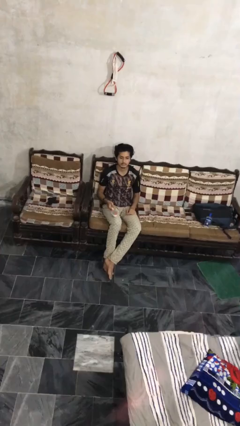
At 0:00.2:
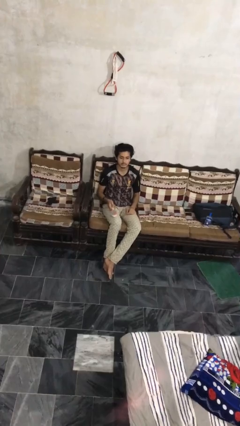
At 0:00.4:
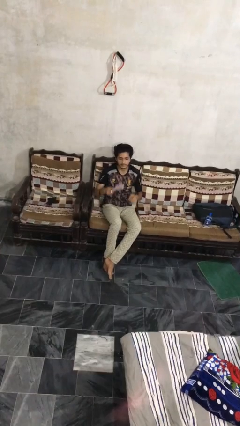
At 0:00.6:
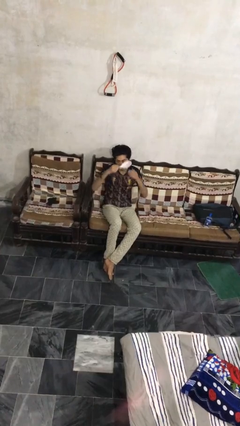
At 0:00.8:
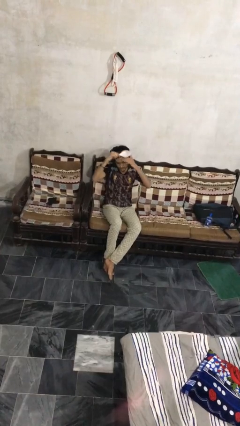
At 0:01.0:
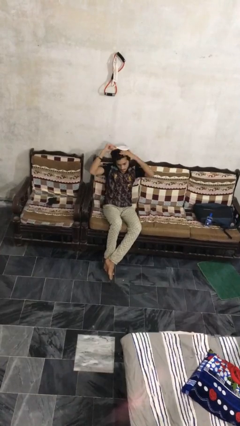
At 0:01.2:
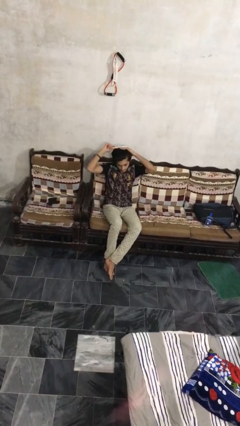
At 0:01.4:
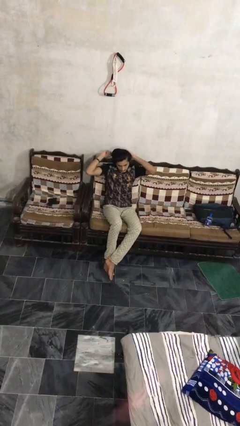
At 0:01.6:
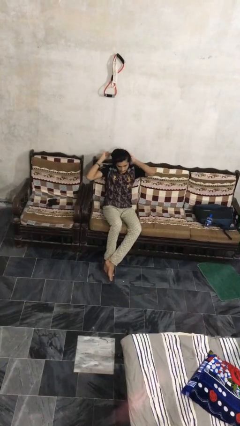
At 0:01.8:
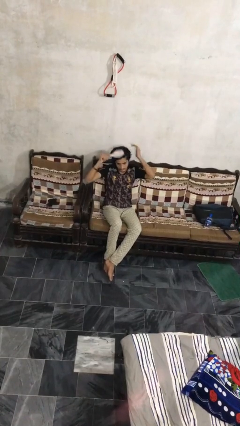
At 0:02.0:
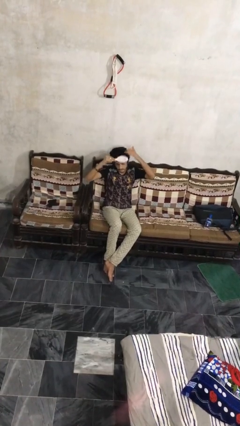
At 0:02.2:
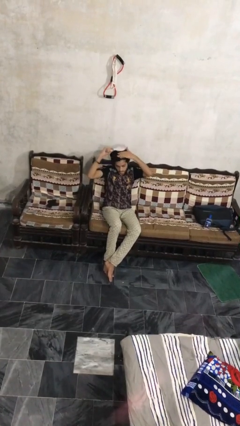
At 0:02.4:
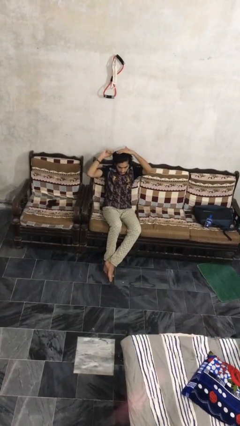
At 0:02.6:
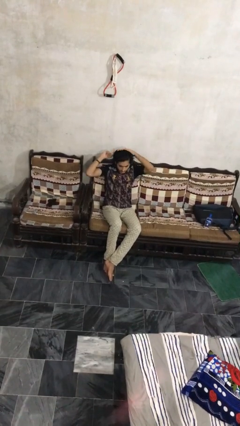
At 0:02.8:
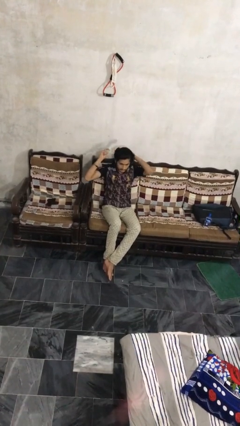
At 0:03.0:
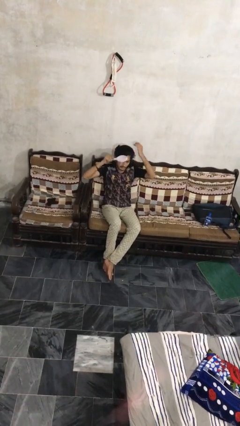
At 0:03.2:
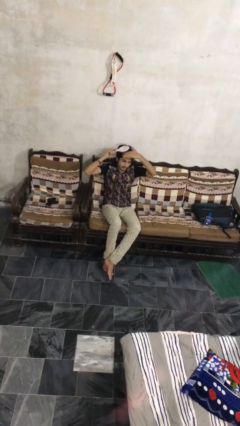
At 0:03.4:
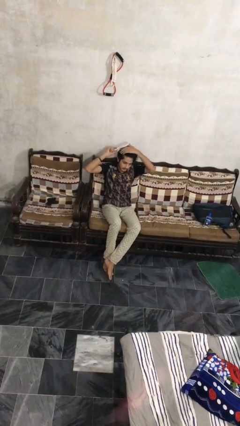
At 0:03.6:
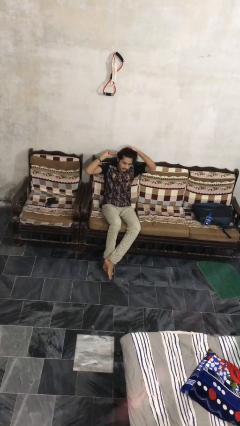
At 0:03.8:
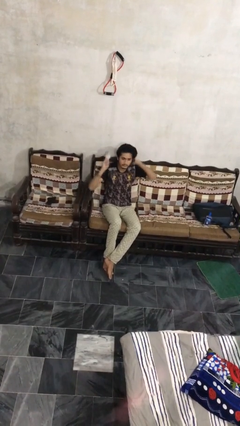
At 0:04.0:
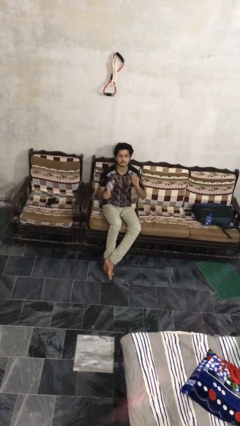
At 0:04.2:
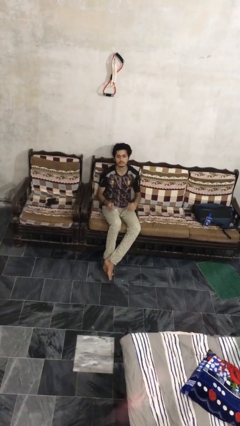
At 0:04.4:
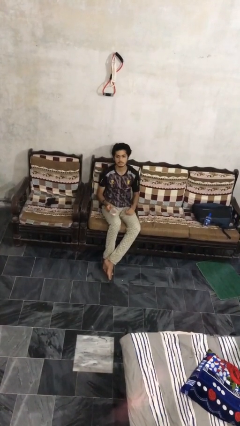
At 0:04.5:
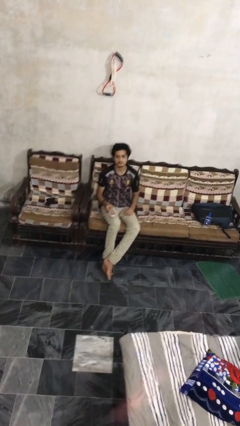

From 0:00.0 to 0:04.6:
person brushes hair

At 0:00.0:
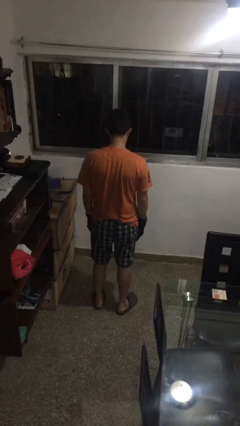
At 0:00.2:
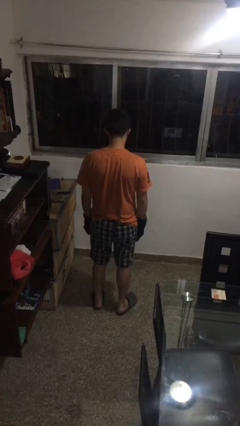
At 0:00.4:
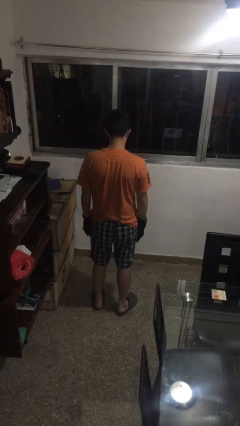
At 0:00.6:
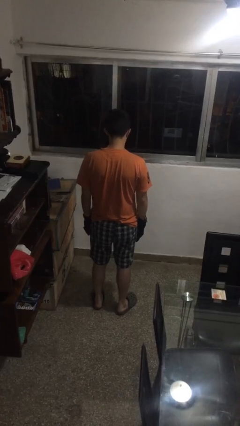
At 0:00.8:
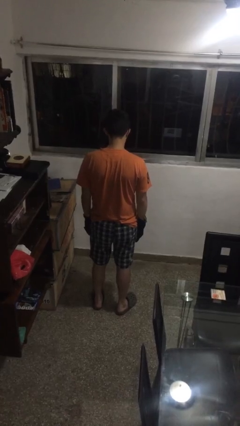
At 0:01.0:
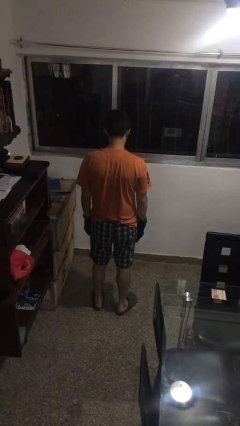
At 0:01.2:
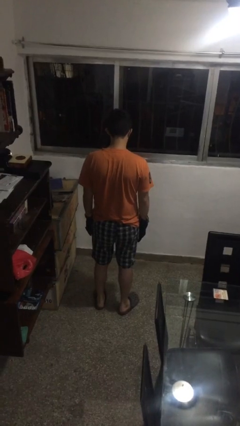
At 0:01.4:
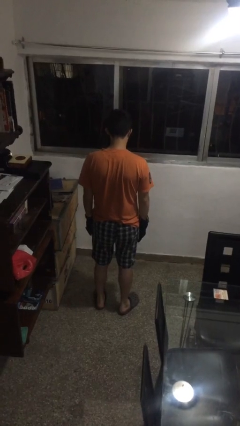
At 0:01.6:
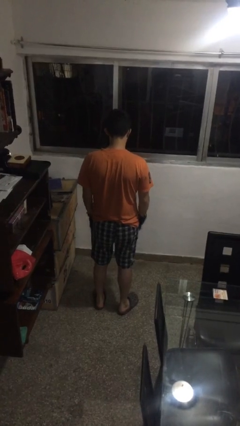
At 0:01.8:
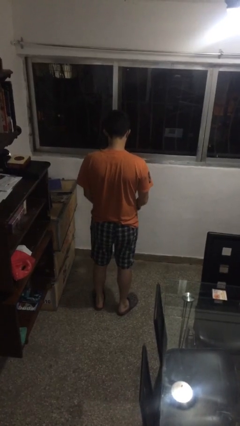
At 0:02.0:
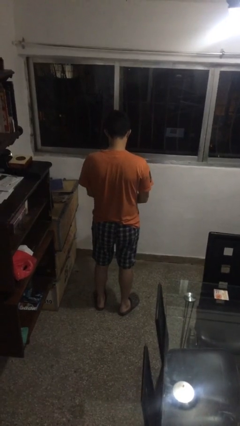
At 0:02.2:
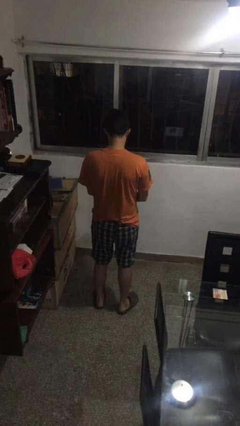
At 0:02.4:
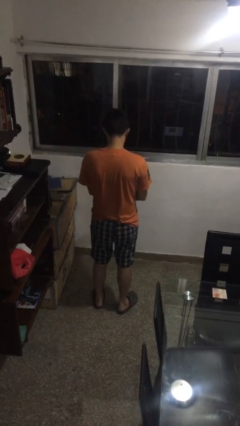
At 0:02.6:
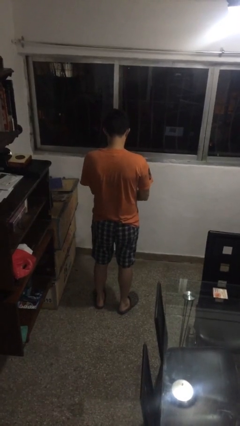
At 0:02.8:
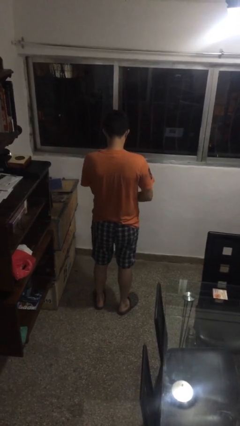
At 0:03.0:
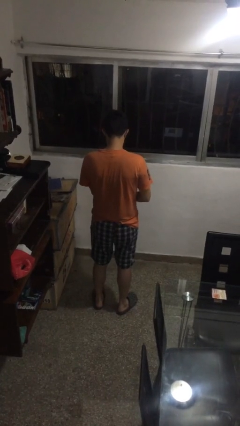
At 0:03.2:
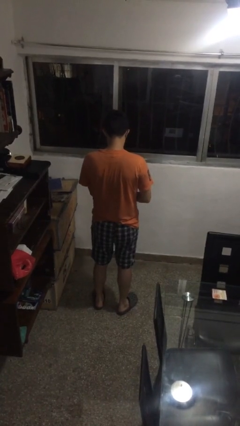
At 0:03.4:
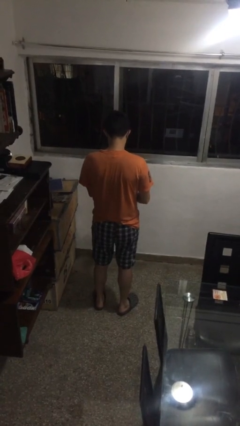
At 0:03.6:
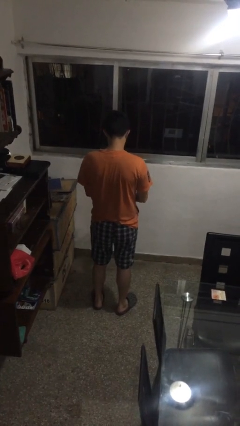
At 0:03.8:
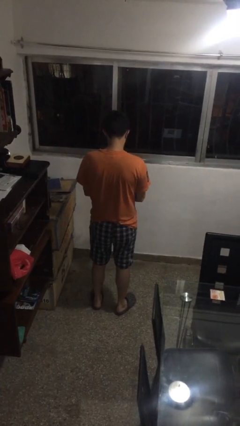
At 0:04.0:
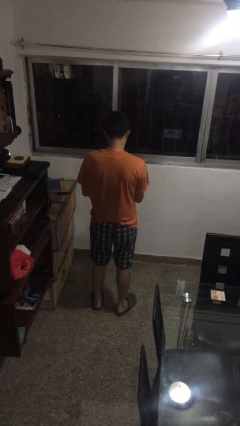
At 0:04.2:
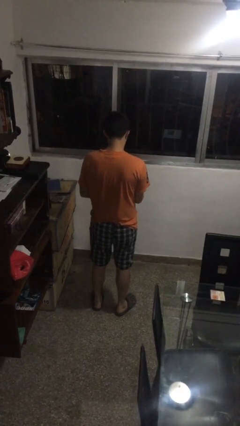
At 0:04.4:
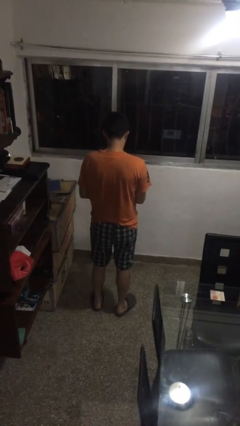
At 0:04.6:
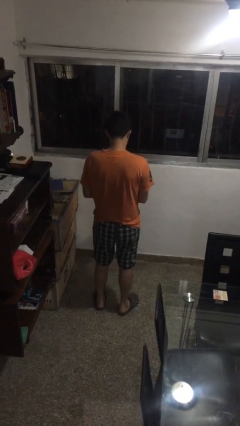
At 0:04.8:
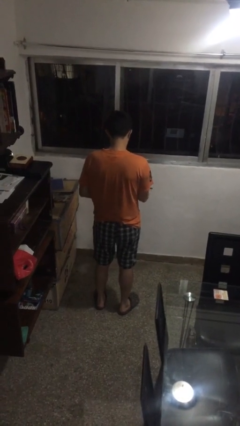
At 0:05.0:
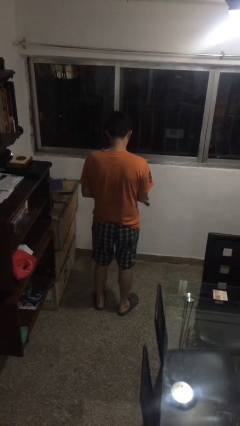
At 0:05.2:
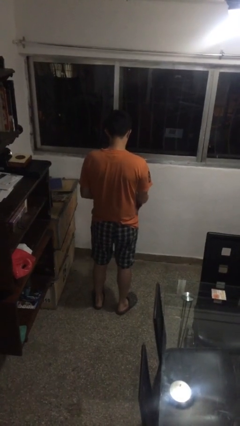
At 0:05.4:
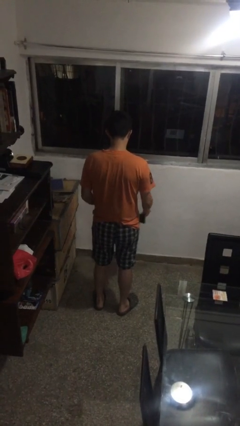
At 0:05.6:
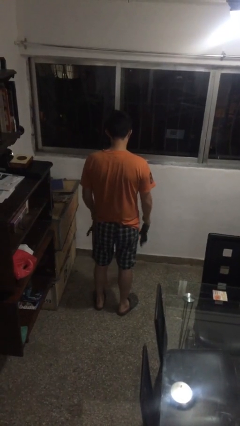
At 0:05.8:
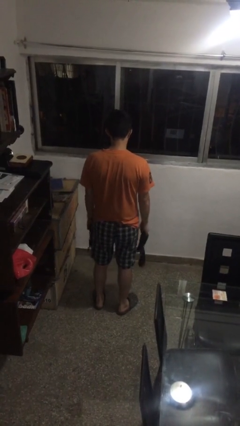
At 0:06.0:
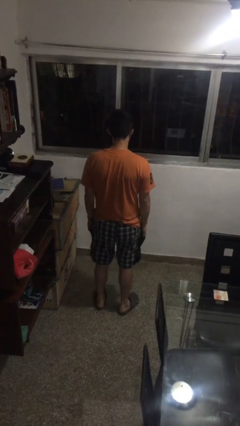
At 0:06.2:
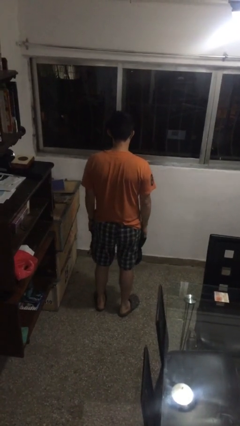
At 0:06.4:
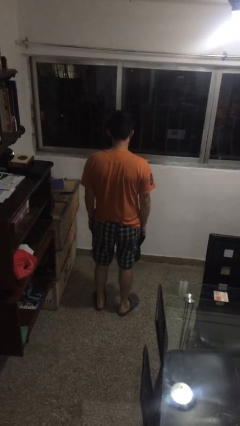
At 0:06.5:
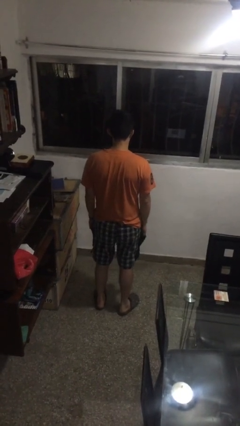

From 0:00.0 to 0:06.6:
person takes off gloves

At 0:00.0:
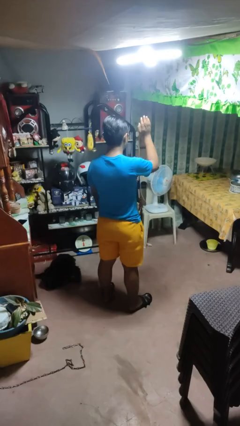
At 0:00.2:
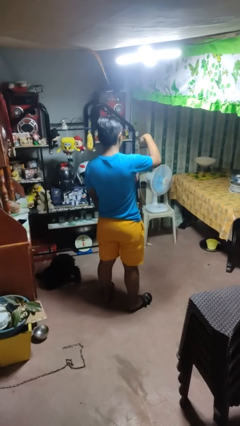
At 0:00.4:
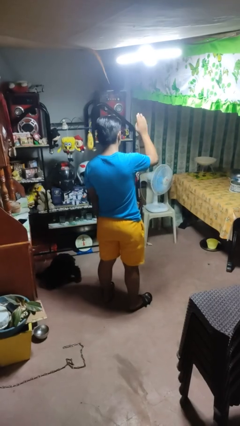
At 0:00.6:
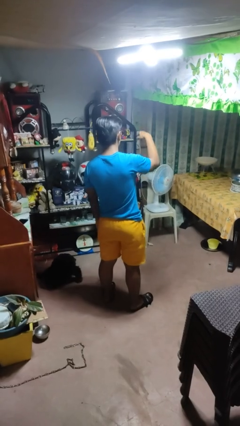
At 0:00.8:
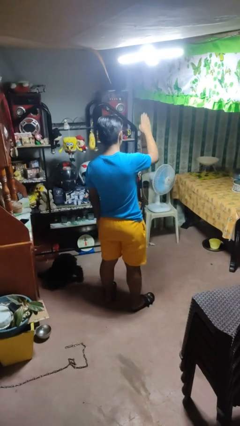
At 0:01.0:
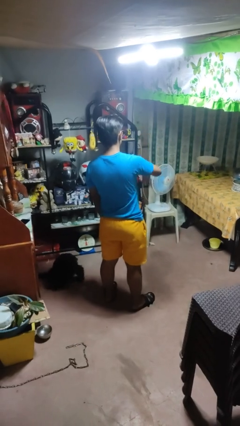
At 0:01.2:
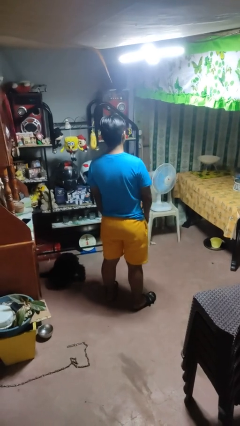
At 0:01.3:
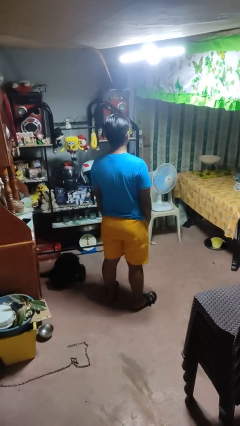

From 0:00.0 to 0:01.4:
person gestures come here

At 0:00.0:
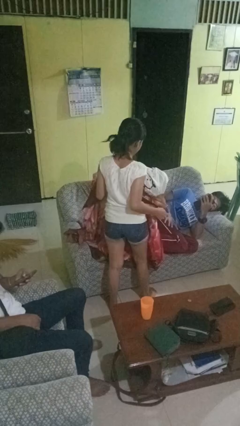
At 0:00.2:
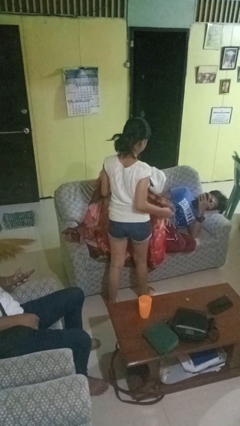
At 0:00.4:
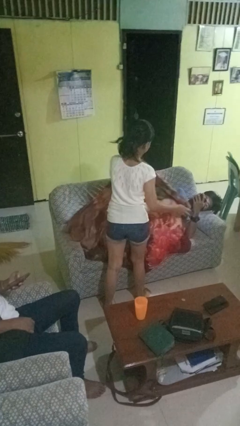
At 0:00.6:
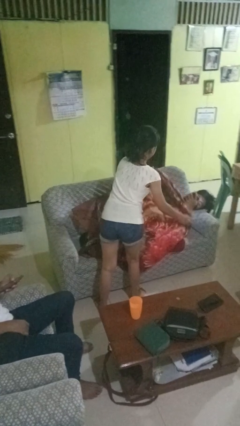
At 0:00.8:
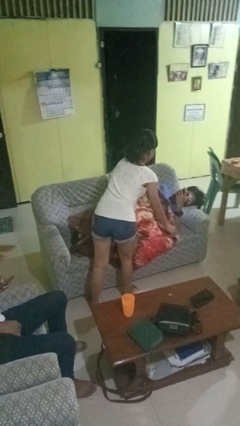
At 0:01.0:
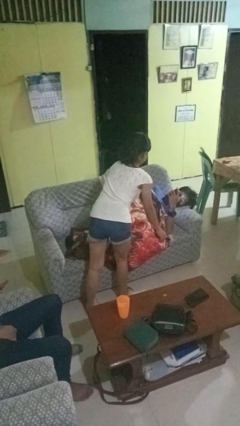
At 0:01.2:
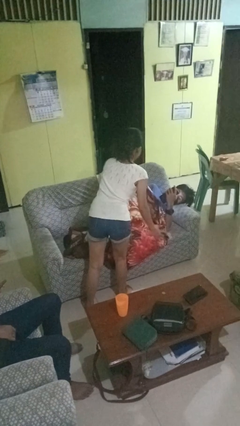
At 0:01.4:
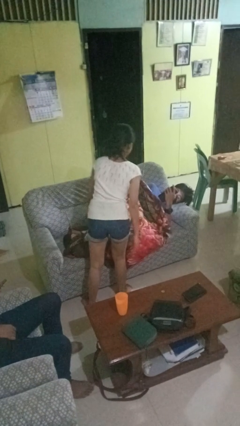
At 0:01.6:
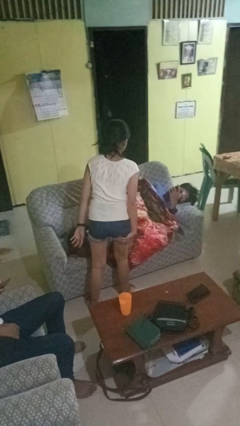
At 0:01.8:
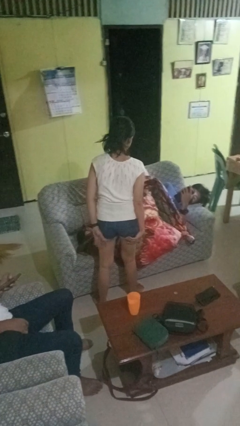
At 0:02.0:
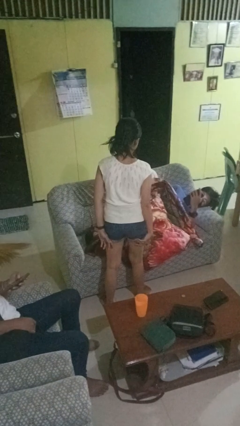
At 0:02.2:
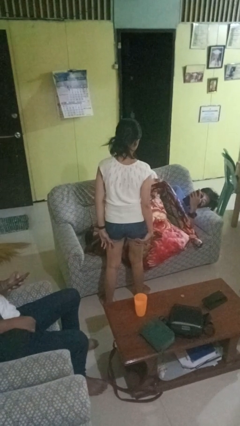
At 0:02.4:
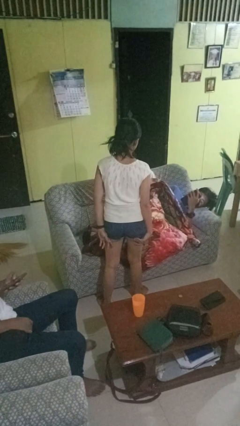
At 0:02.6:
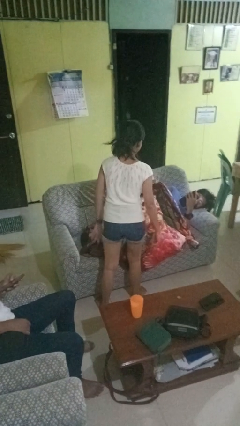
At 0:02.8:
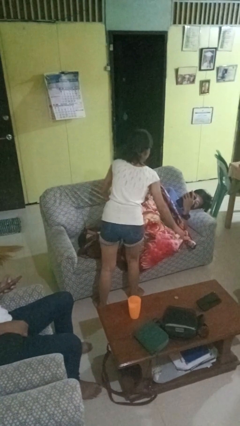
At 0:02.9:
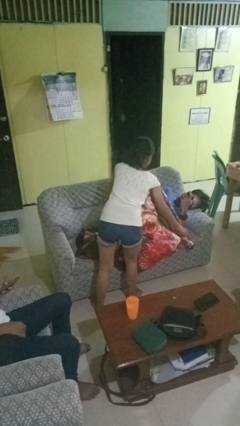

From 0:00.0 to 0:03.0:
person covers friend with blanket

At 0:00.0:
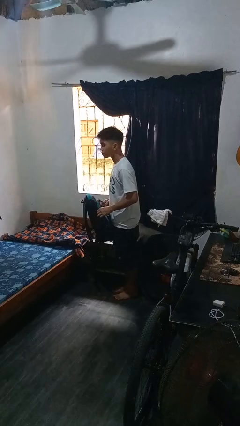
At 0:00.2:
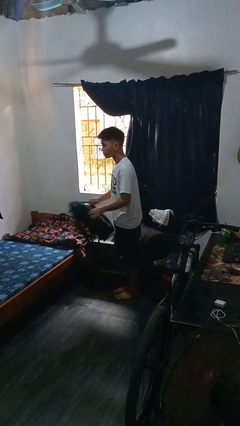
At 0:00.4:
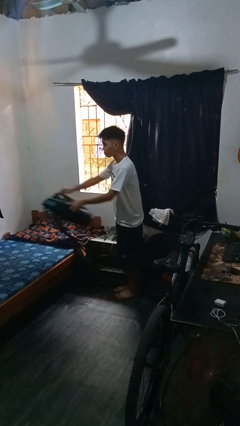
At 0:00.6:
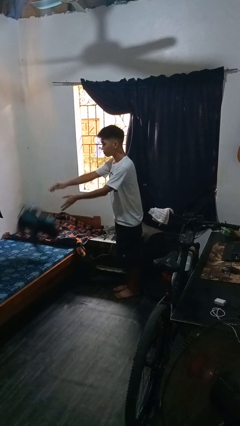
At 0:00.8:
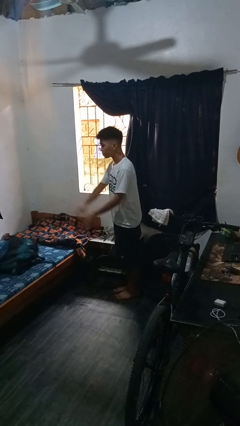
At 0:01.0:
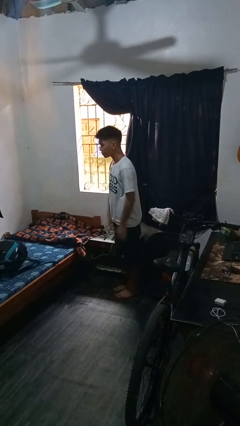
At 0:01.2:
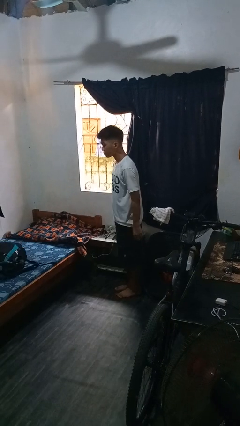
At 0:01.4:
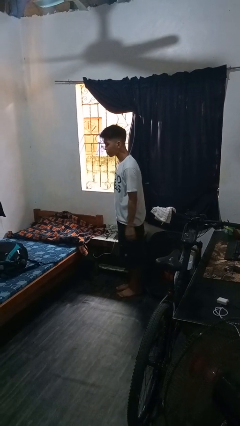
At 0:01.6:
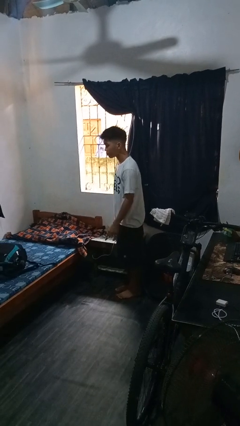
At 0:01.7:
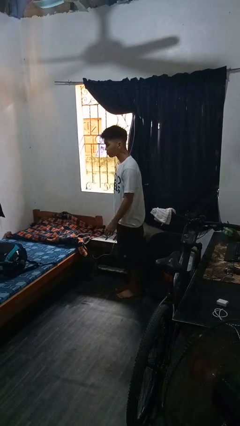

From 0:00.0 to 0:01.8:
person throws object on bed
